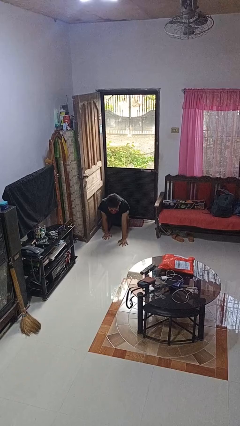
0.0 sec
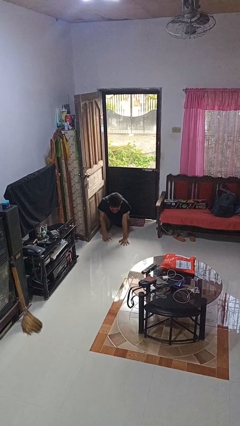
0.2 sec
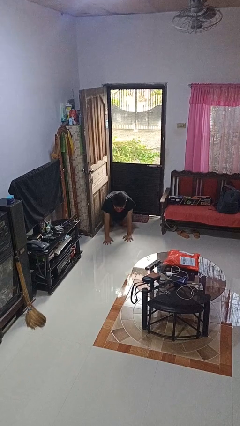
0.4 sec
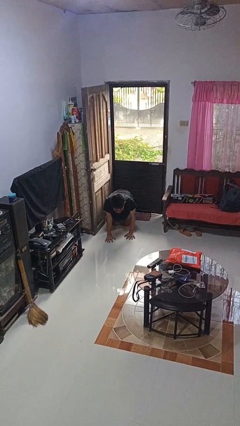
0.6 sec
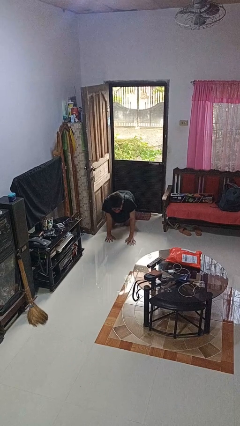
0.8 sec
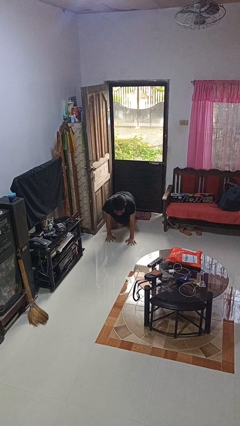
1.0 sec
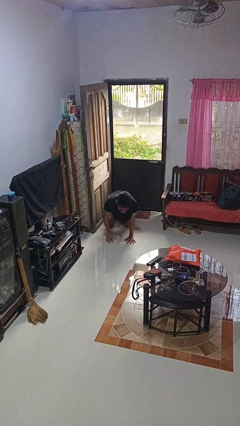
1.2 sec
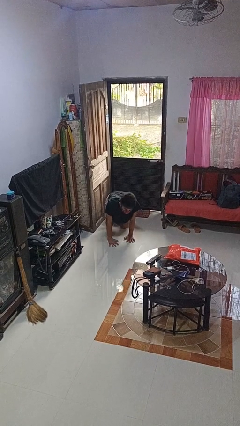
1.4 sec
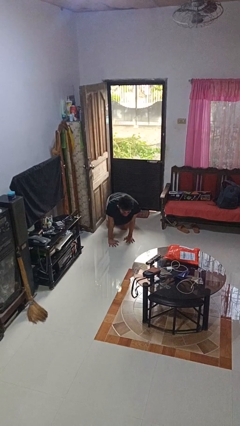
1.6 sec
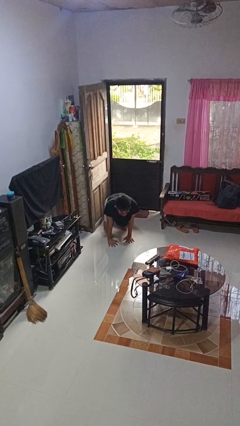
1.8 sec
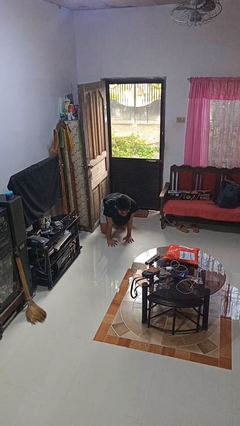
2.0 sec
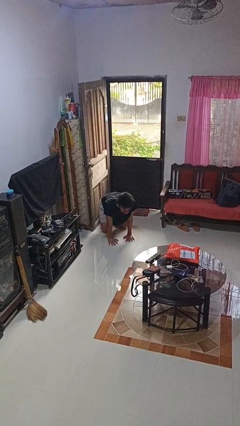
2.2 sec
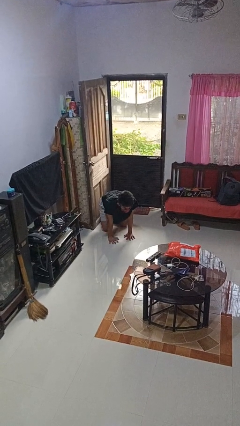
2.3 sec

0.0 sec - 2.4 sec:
person crawls

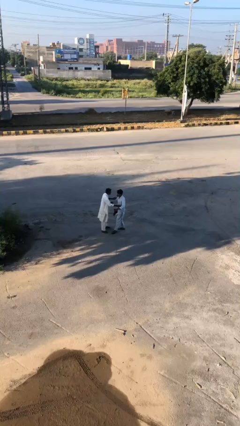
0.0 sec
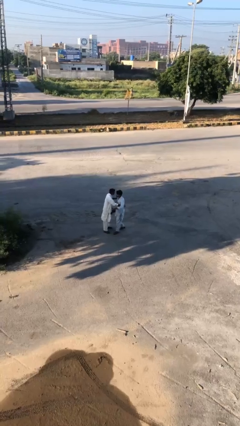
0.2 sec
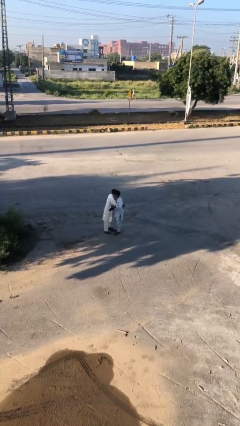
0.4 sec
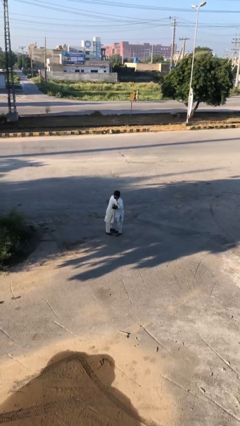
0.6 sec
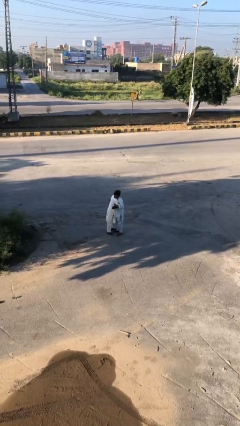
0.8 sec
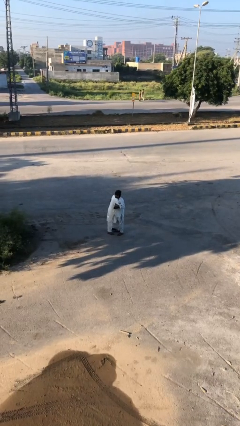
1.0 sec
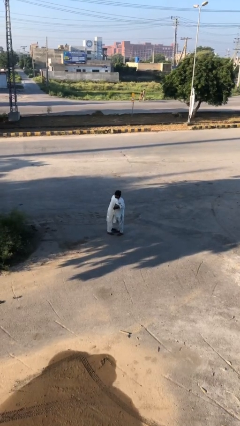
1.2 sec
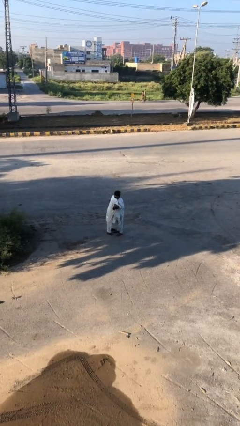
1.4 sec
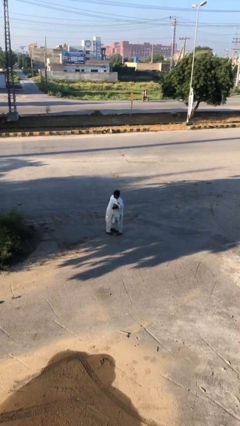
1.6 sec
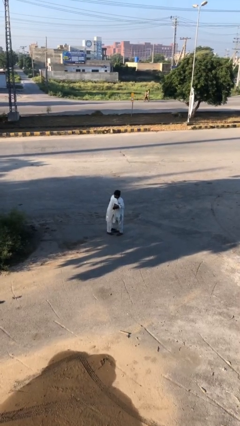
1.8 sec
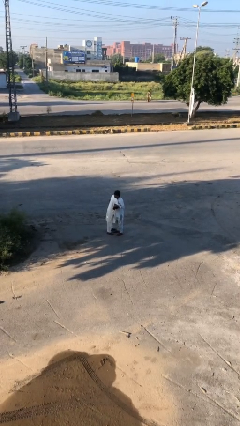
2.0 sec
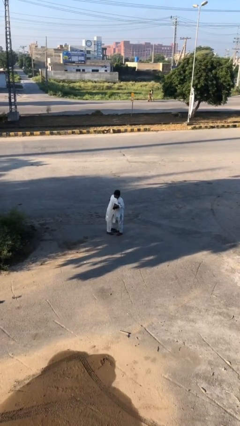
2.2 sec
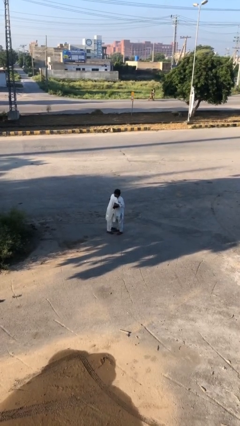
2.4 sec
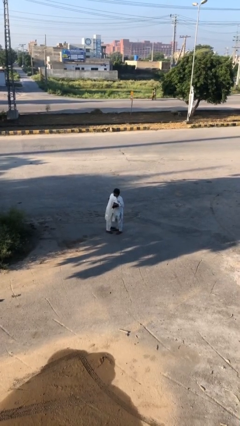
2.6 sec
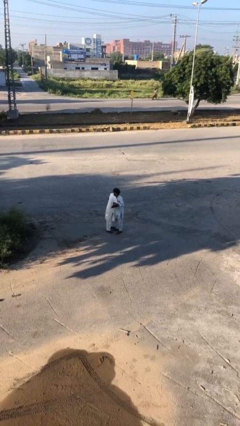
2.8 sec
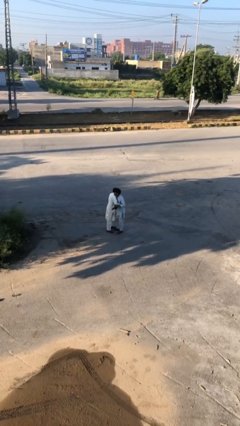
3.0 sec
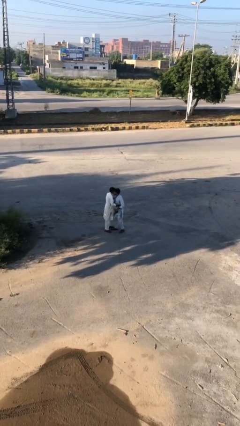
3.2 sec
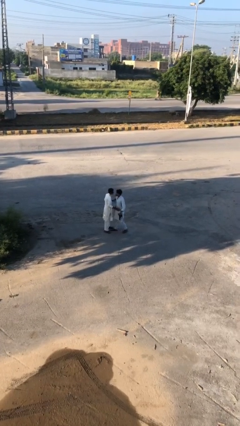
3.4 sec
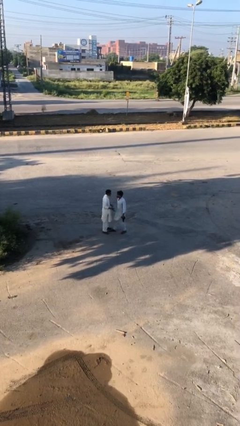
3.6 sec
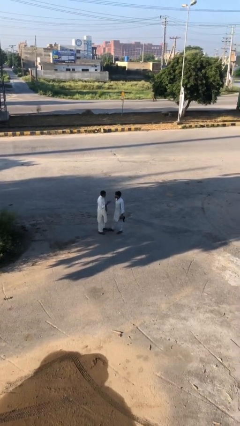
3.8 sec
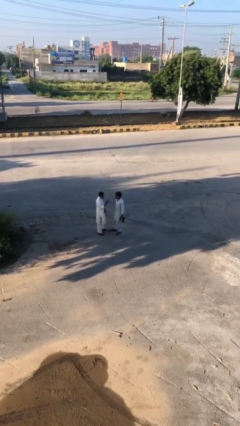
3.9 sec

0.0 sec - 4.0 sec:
person embraces person

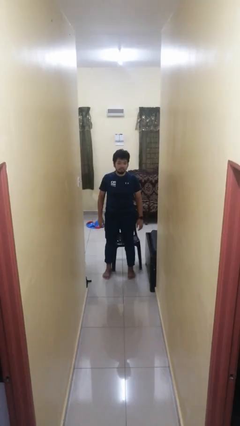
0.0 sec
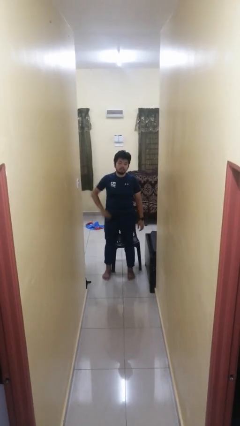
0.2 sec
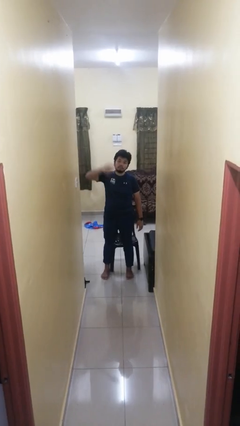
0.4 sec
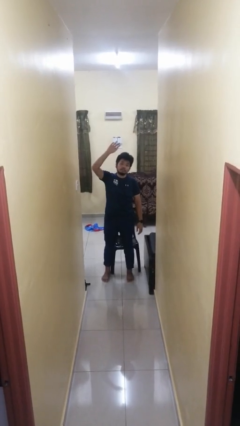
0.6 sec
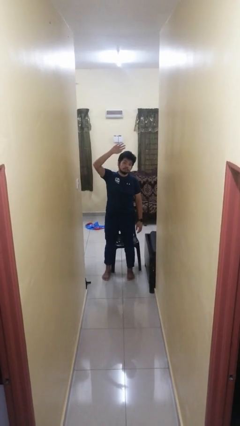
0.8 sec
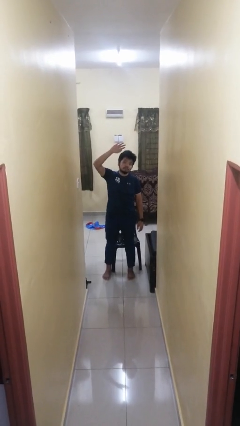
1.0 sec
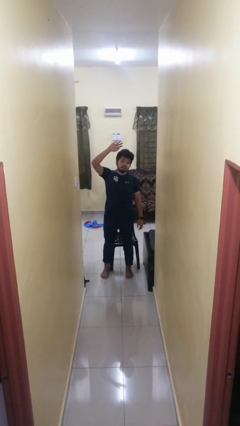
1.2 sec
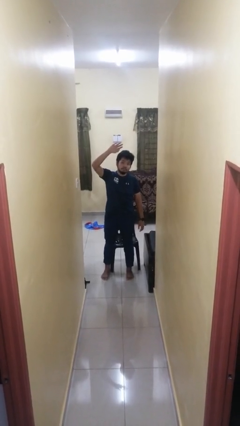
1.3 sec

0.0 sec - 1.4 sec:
person gestures swipe up

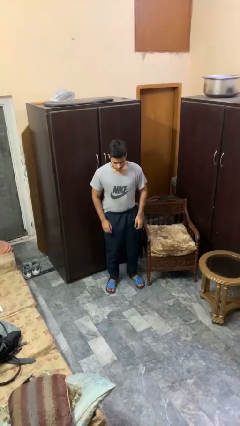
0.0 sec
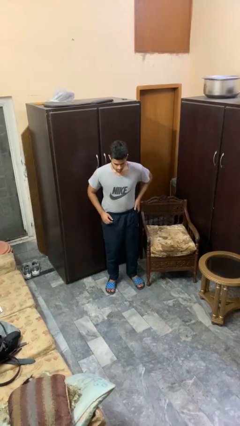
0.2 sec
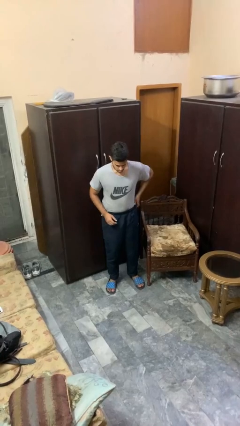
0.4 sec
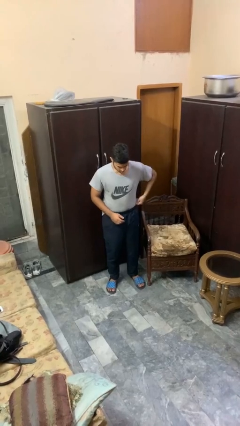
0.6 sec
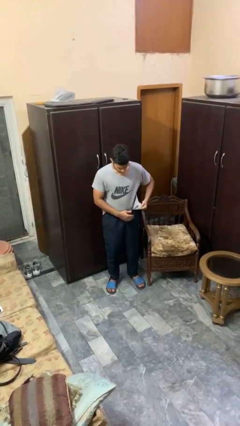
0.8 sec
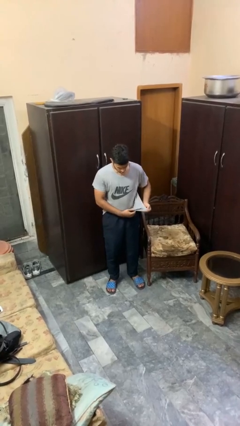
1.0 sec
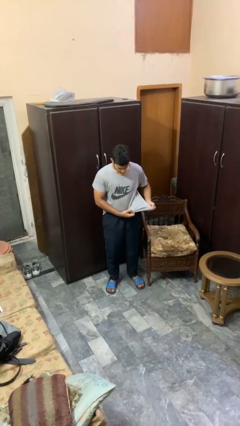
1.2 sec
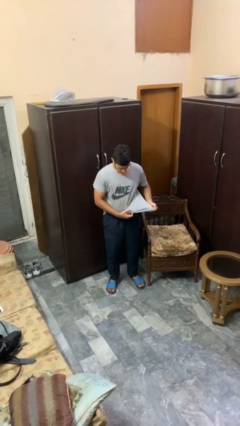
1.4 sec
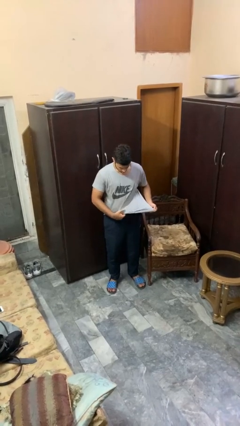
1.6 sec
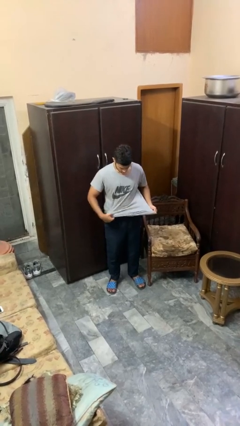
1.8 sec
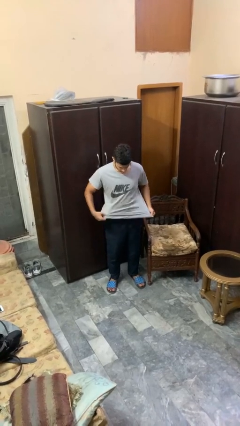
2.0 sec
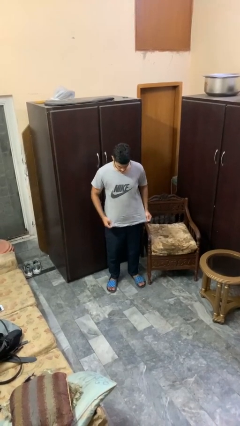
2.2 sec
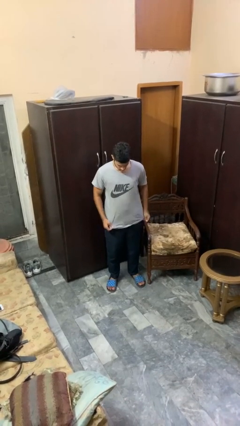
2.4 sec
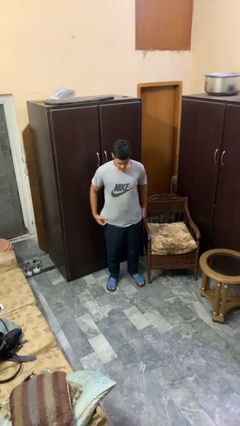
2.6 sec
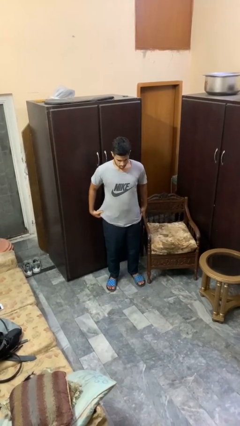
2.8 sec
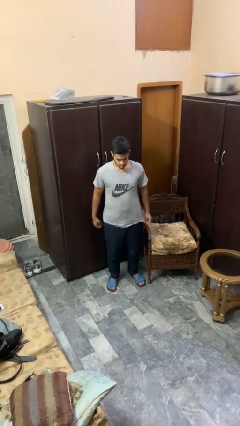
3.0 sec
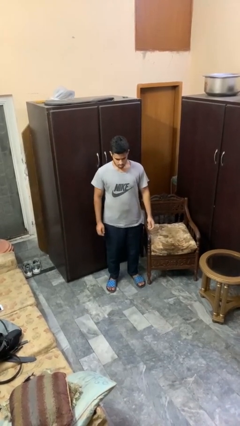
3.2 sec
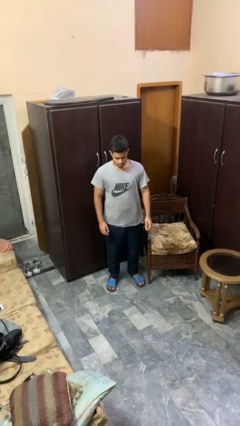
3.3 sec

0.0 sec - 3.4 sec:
person untucks shirt

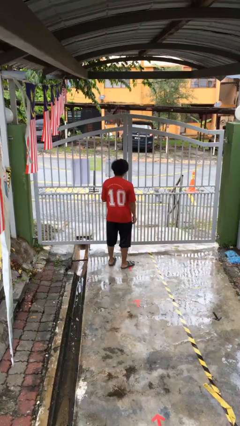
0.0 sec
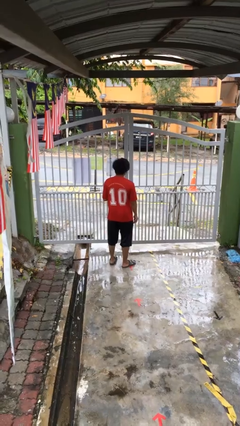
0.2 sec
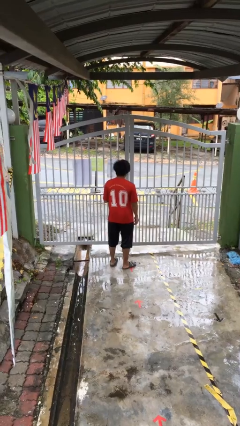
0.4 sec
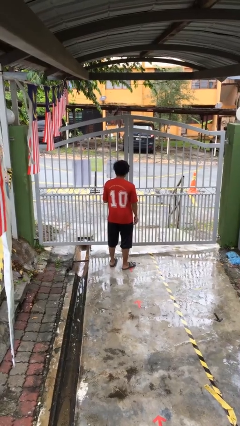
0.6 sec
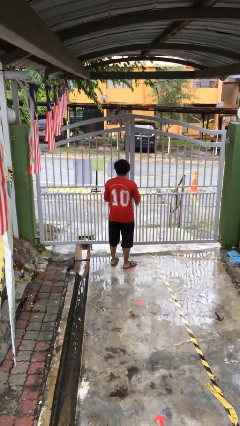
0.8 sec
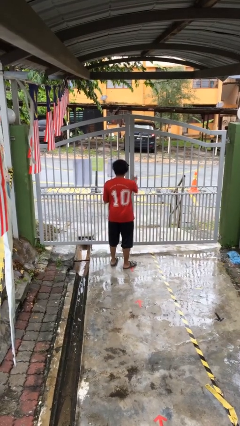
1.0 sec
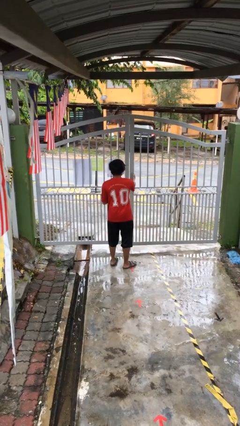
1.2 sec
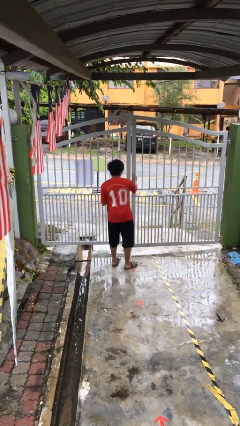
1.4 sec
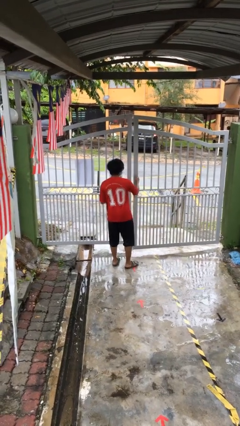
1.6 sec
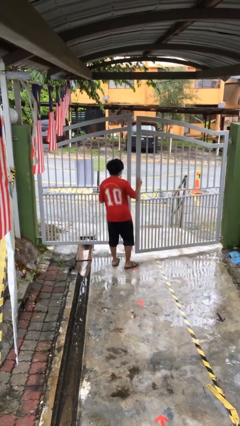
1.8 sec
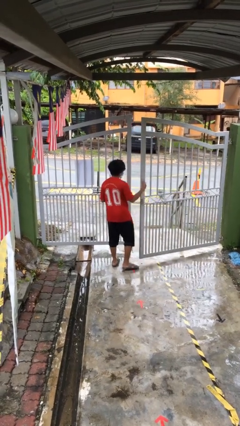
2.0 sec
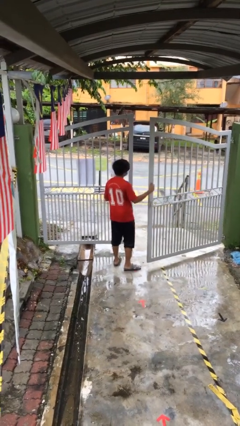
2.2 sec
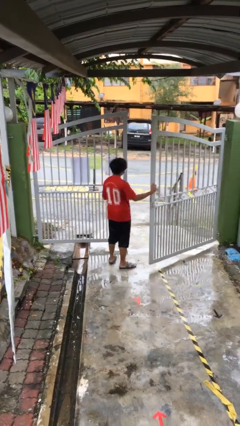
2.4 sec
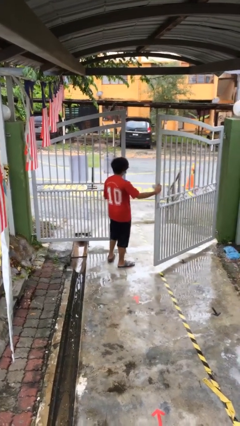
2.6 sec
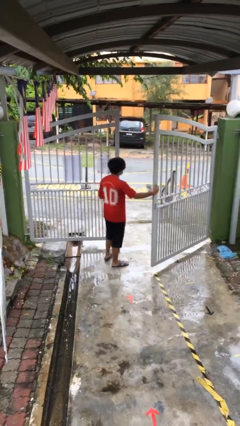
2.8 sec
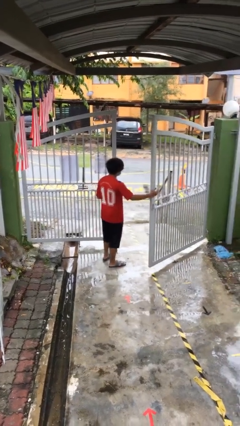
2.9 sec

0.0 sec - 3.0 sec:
person opens facility door

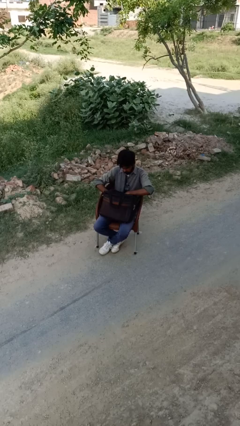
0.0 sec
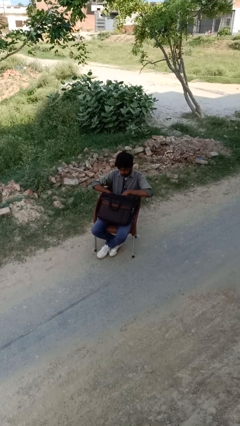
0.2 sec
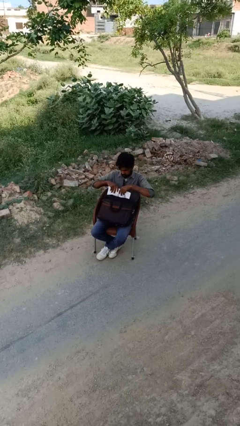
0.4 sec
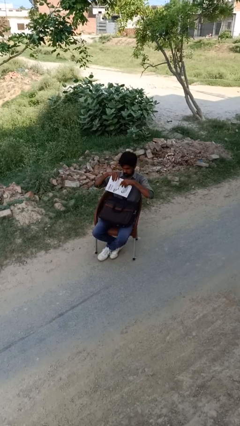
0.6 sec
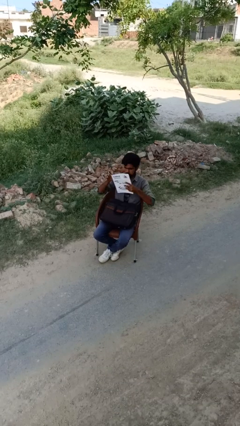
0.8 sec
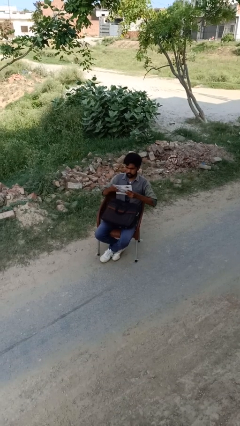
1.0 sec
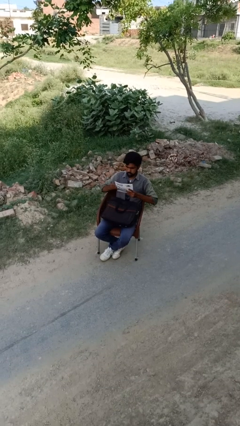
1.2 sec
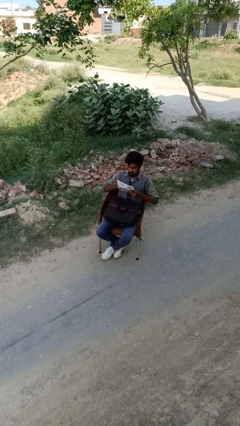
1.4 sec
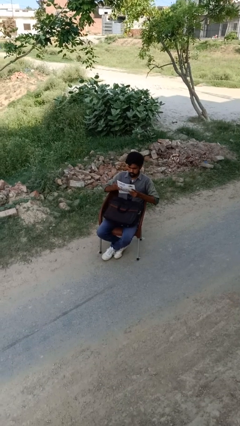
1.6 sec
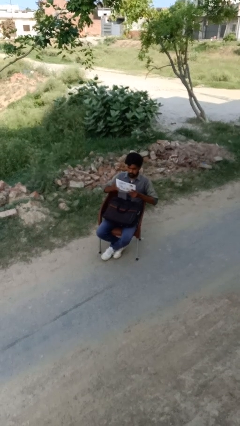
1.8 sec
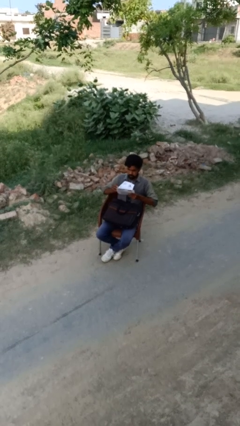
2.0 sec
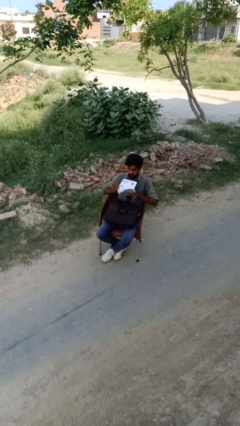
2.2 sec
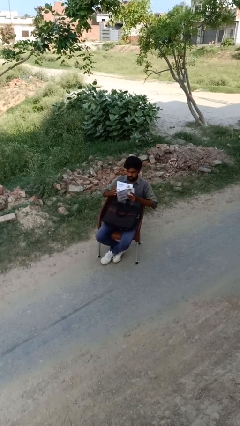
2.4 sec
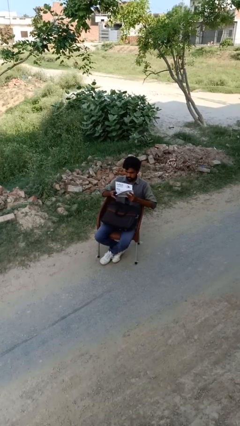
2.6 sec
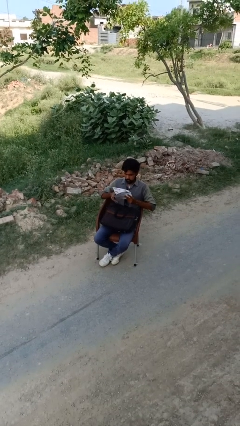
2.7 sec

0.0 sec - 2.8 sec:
person takes object from backpack

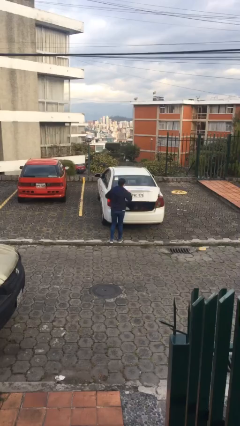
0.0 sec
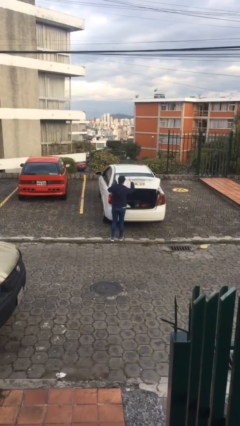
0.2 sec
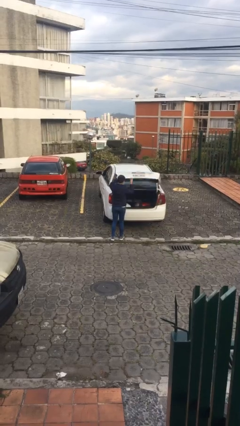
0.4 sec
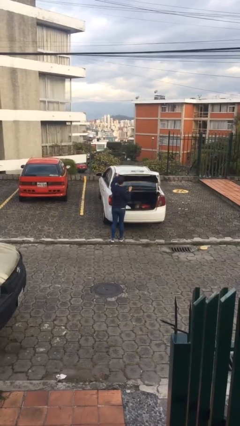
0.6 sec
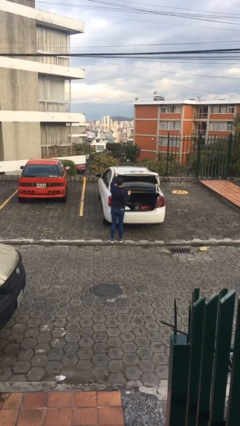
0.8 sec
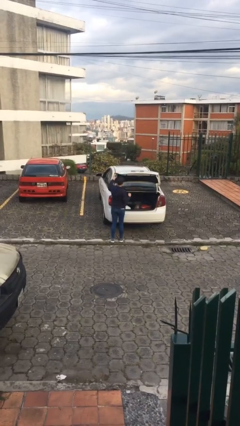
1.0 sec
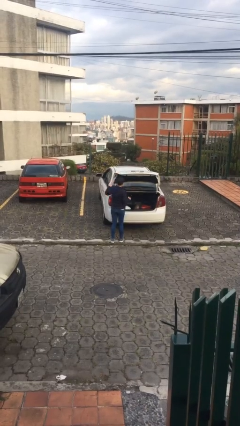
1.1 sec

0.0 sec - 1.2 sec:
person opens car trunk
